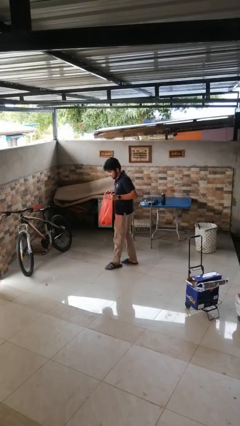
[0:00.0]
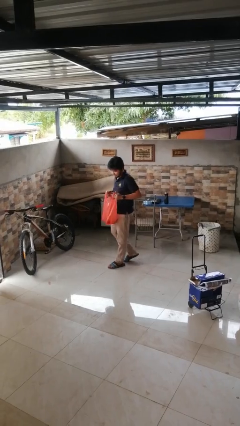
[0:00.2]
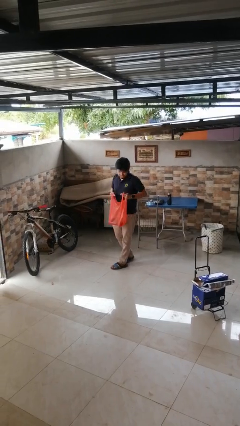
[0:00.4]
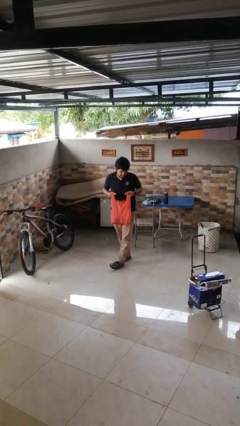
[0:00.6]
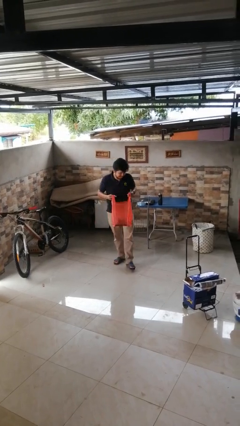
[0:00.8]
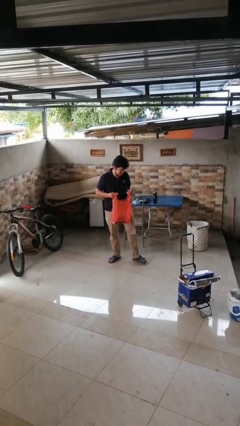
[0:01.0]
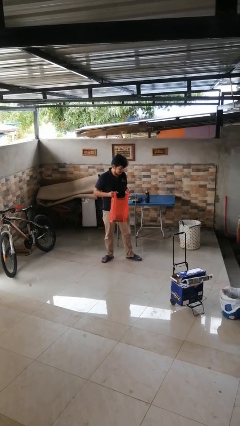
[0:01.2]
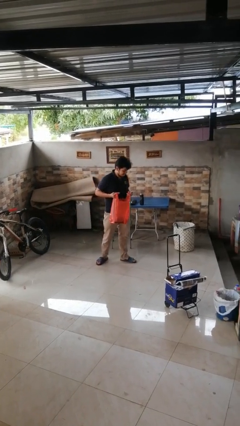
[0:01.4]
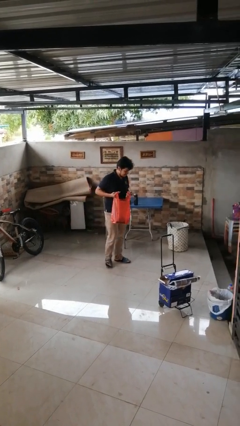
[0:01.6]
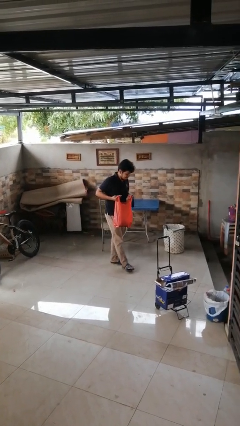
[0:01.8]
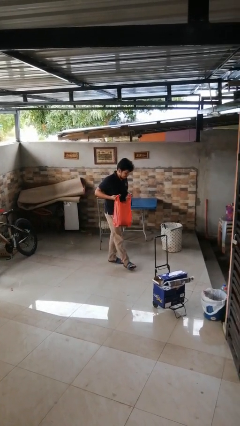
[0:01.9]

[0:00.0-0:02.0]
person carries groceries

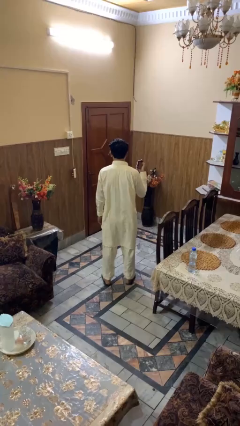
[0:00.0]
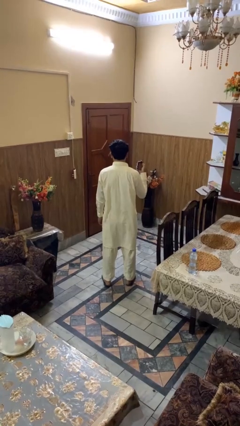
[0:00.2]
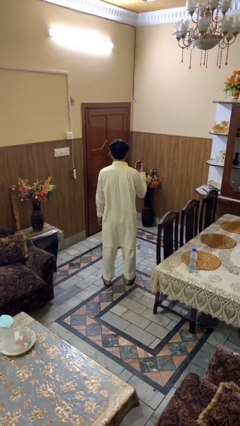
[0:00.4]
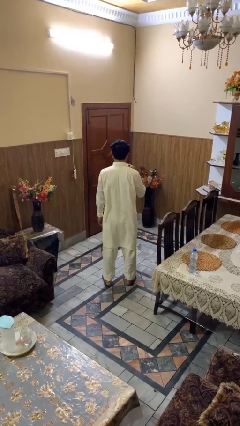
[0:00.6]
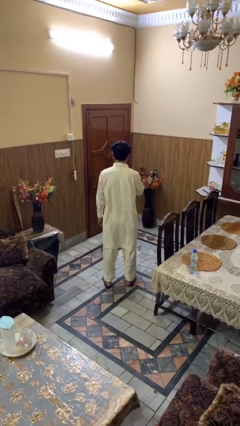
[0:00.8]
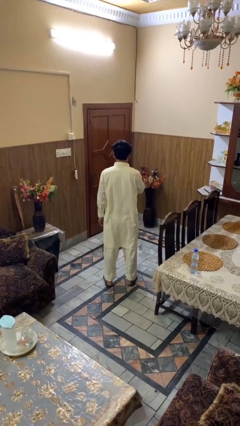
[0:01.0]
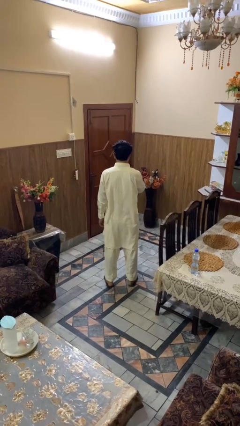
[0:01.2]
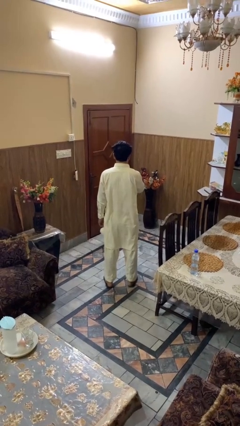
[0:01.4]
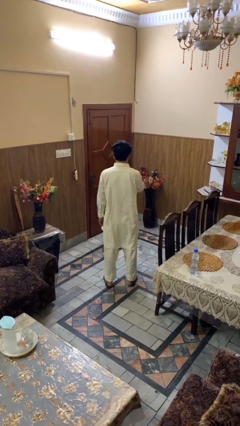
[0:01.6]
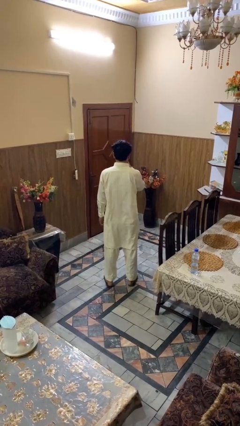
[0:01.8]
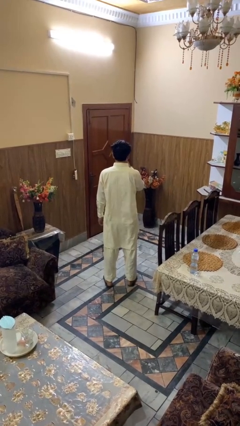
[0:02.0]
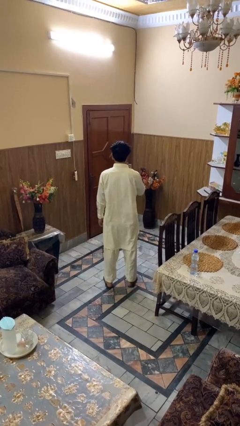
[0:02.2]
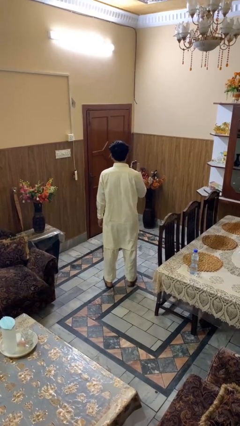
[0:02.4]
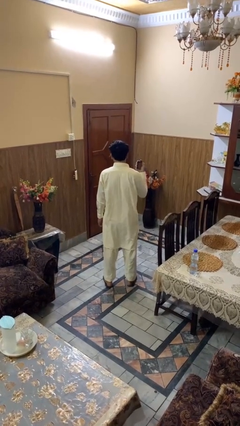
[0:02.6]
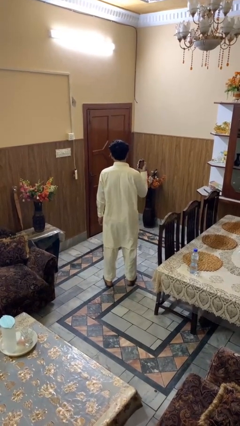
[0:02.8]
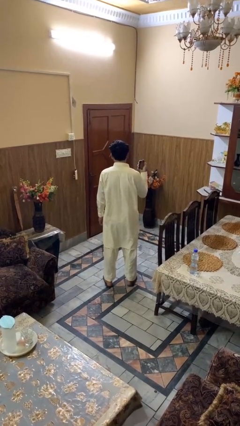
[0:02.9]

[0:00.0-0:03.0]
person vapes

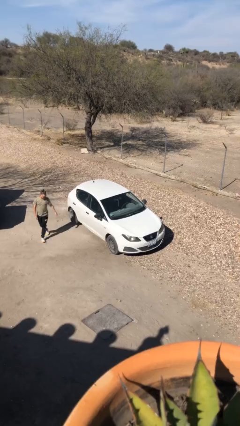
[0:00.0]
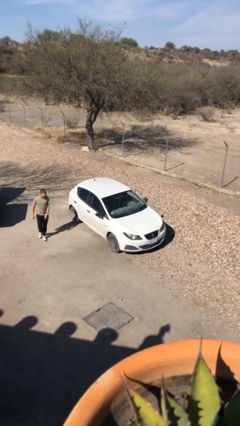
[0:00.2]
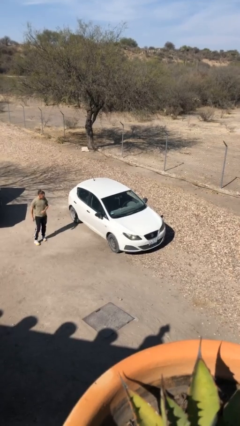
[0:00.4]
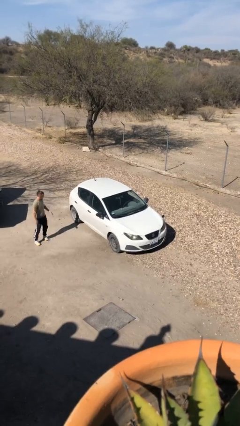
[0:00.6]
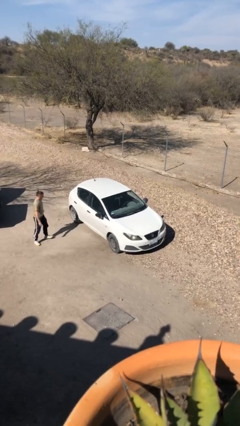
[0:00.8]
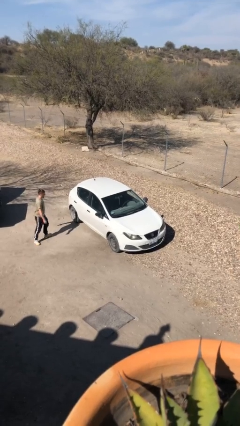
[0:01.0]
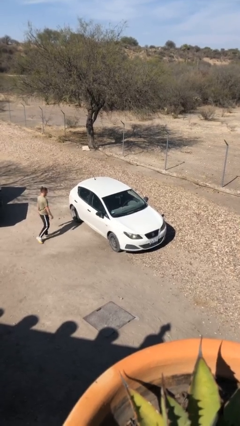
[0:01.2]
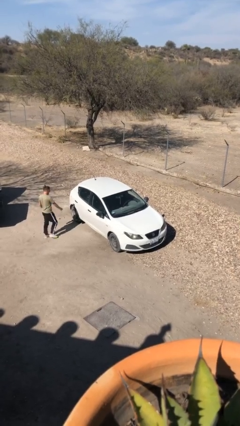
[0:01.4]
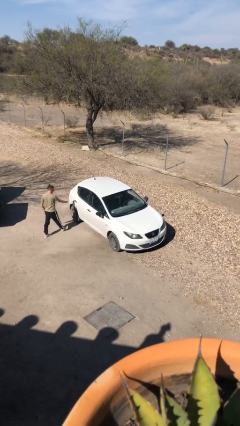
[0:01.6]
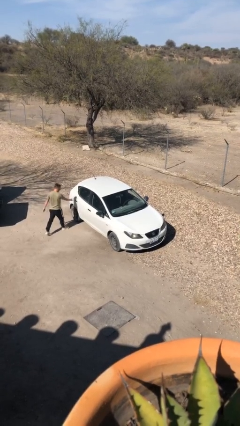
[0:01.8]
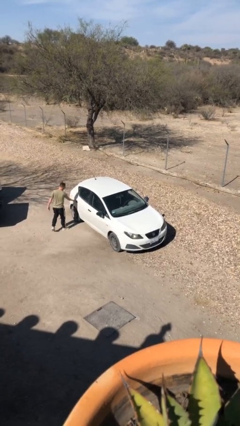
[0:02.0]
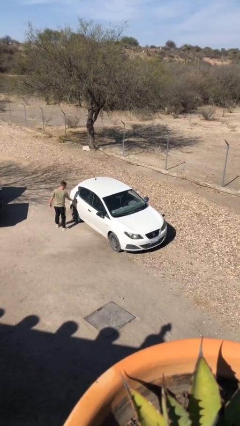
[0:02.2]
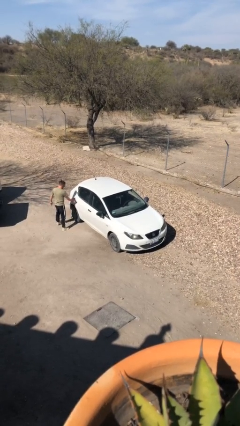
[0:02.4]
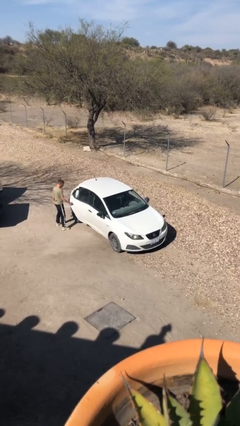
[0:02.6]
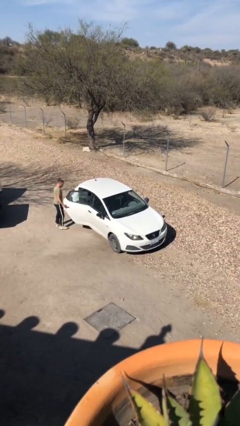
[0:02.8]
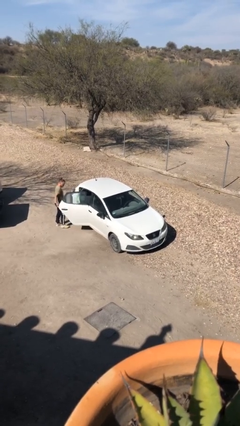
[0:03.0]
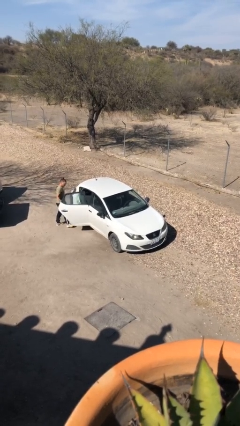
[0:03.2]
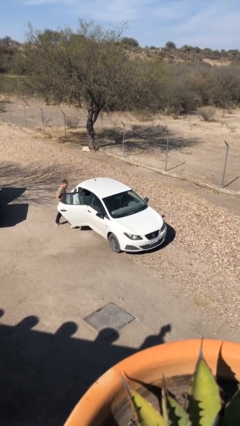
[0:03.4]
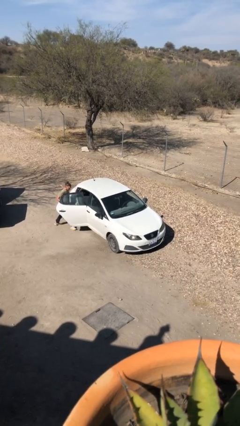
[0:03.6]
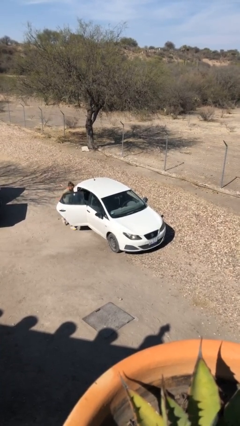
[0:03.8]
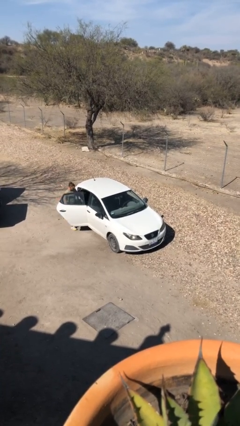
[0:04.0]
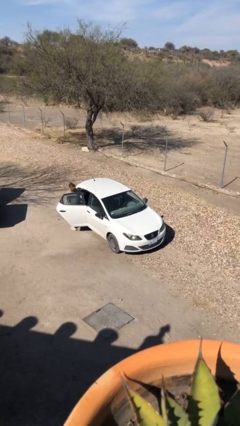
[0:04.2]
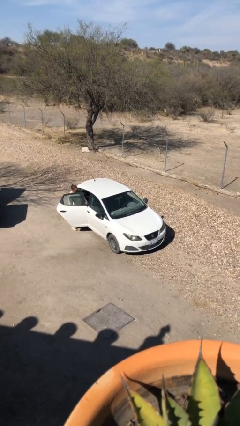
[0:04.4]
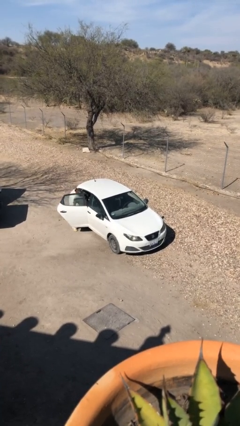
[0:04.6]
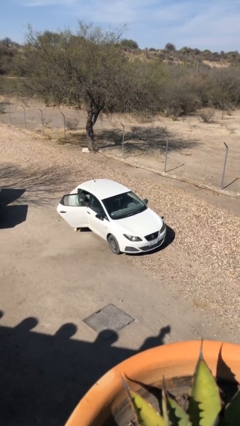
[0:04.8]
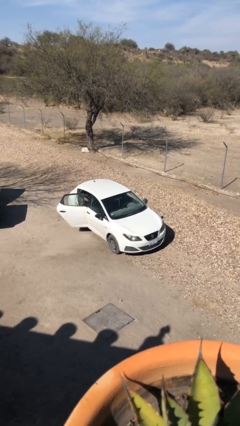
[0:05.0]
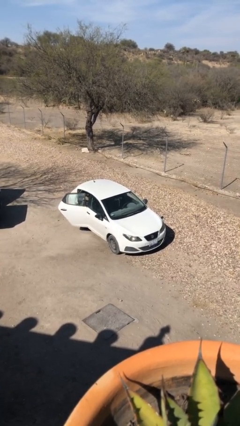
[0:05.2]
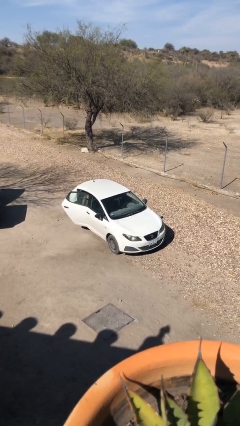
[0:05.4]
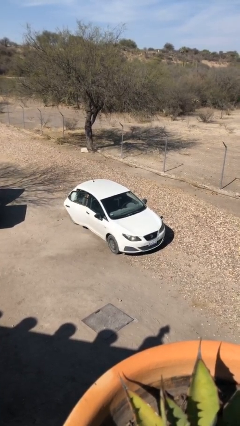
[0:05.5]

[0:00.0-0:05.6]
car picks up person

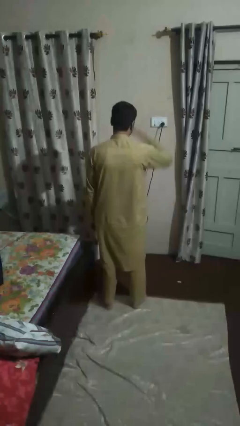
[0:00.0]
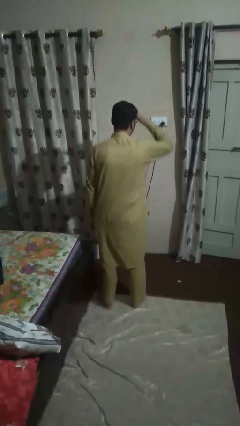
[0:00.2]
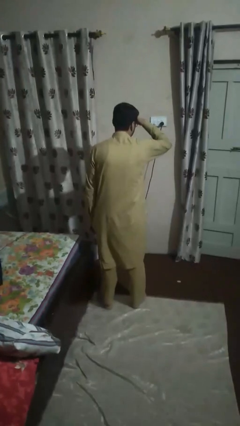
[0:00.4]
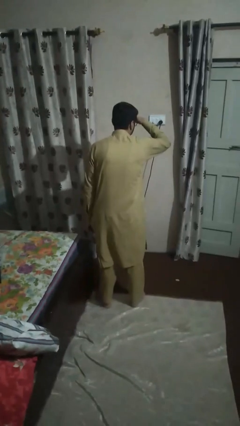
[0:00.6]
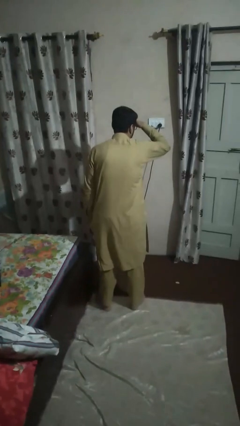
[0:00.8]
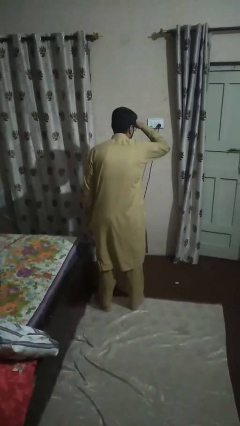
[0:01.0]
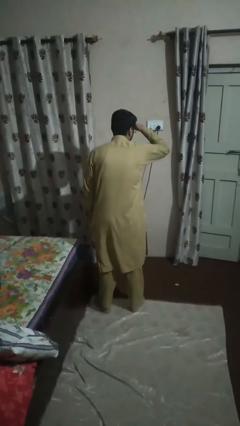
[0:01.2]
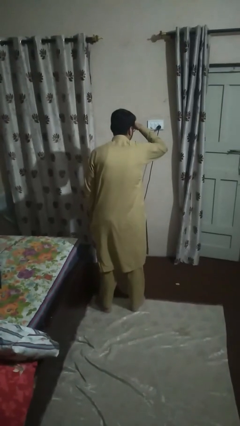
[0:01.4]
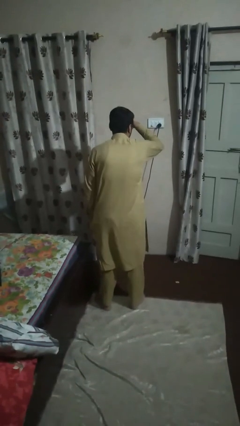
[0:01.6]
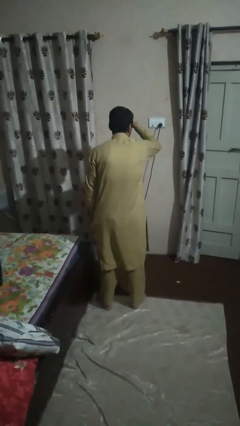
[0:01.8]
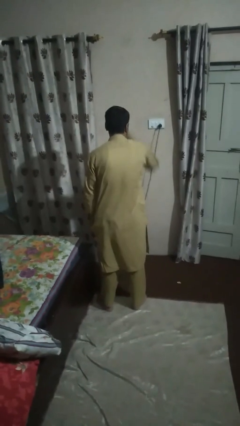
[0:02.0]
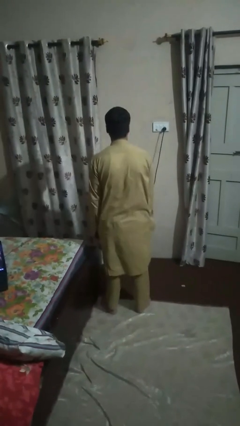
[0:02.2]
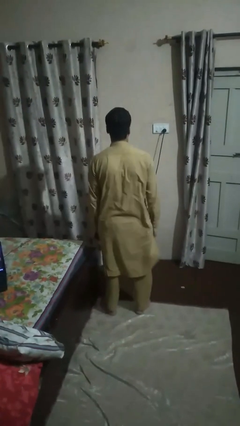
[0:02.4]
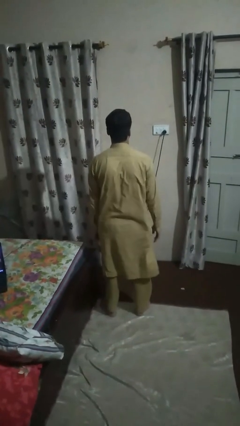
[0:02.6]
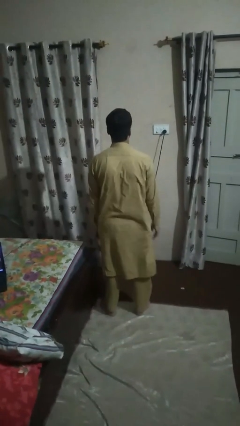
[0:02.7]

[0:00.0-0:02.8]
person shades eyes

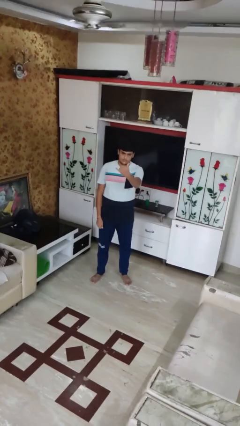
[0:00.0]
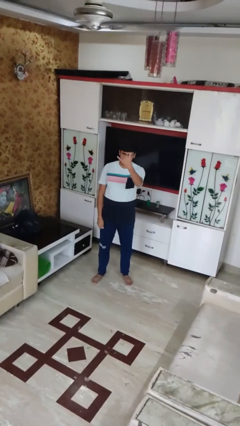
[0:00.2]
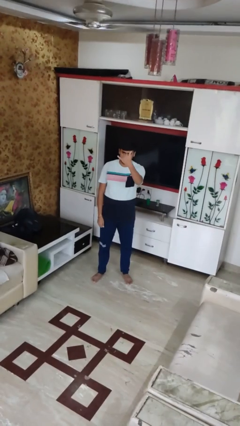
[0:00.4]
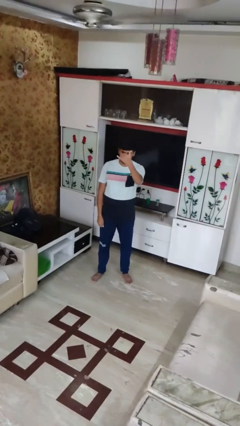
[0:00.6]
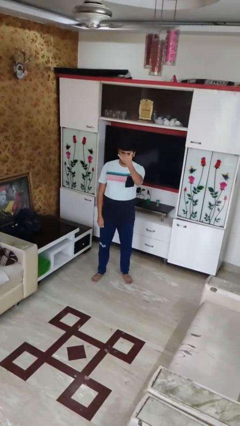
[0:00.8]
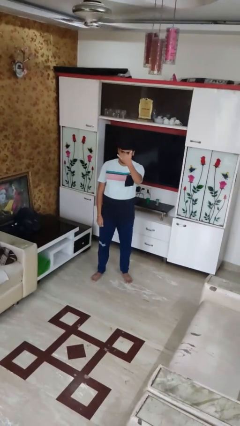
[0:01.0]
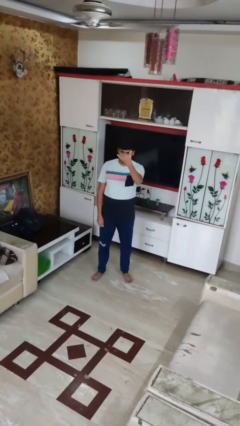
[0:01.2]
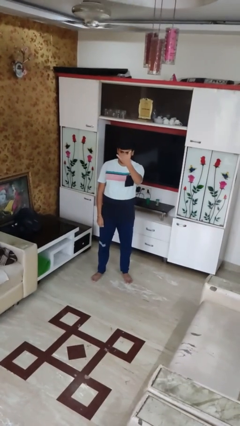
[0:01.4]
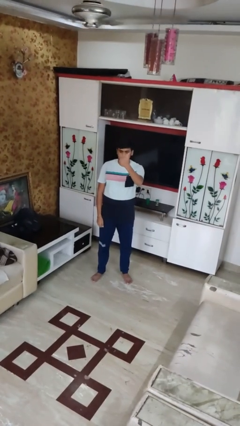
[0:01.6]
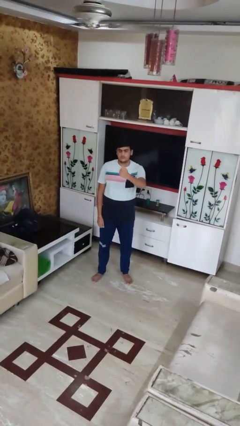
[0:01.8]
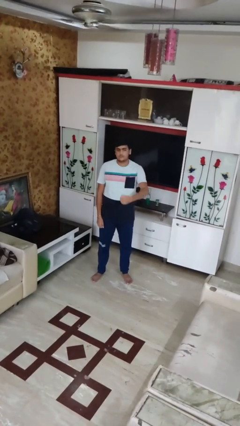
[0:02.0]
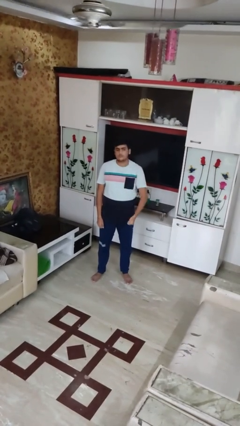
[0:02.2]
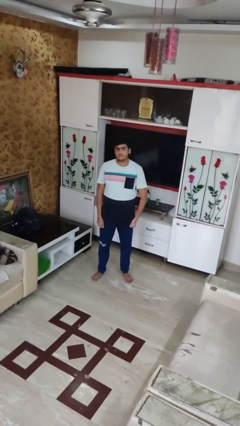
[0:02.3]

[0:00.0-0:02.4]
person gestures hang loose

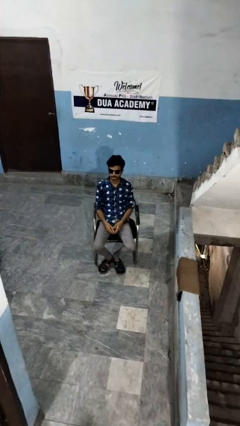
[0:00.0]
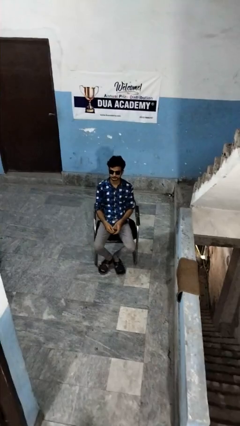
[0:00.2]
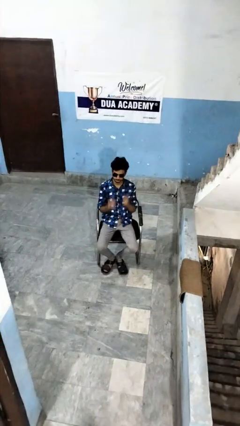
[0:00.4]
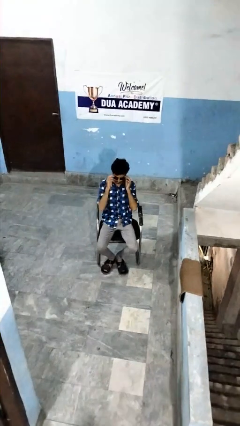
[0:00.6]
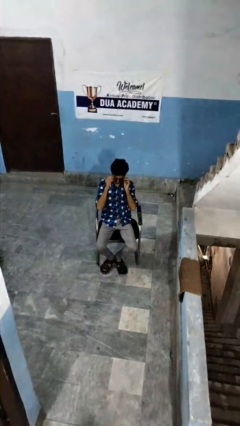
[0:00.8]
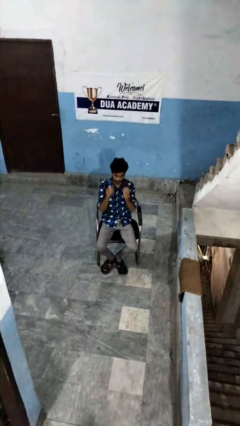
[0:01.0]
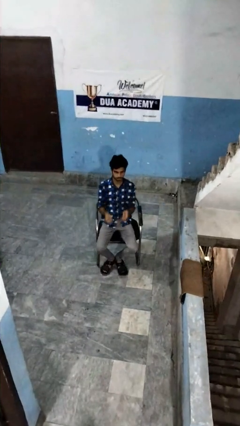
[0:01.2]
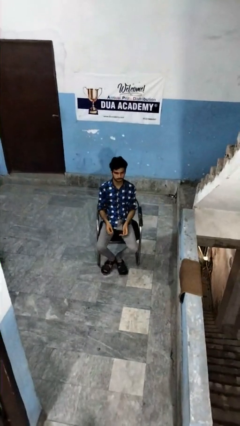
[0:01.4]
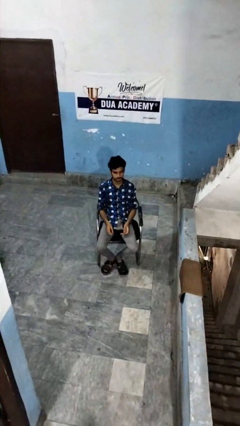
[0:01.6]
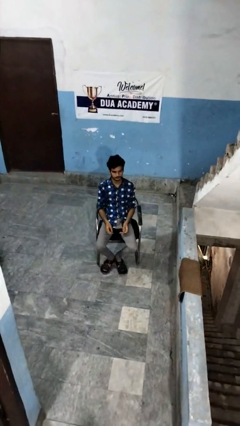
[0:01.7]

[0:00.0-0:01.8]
person takes off sunglasses
